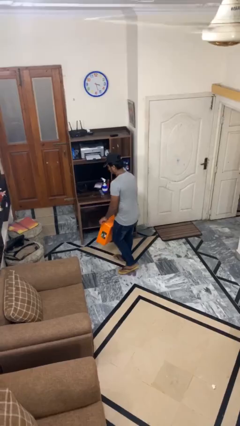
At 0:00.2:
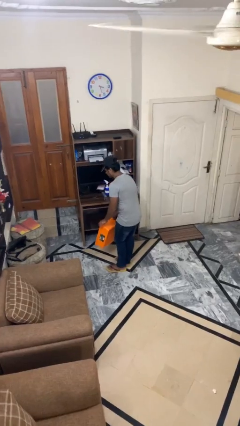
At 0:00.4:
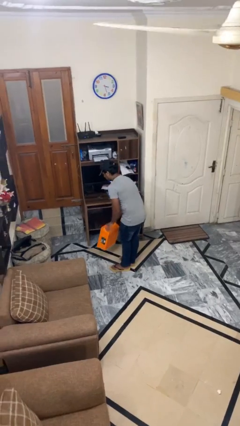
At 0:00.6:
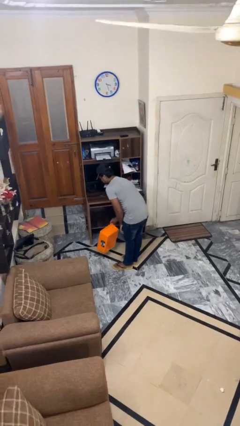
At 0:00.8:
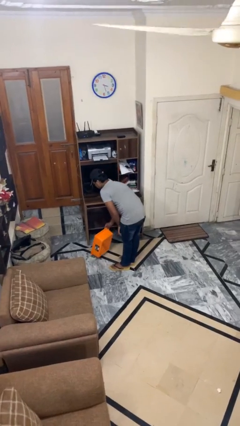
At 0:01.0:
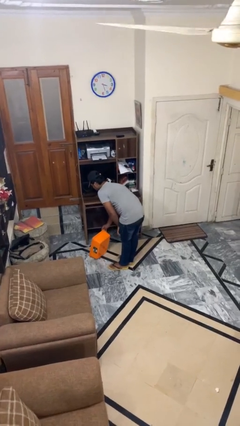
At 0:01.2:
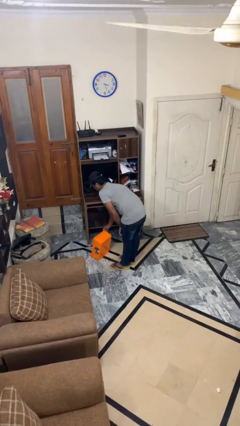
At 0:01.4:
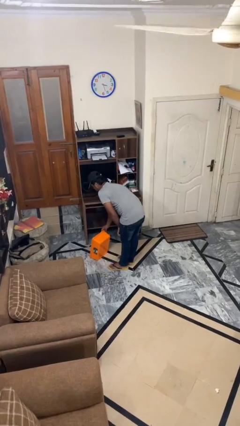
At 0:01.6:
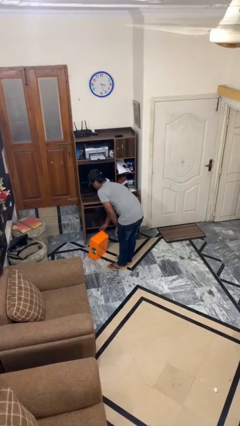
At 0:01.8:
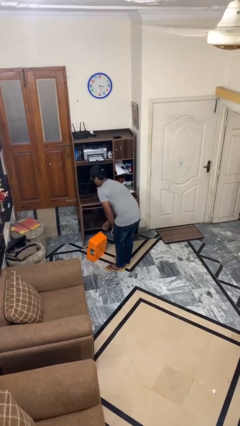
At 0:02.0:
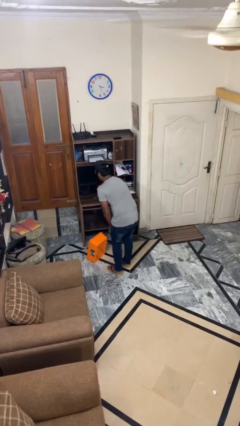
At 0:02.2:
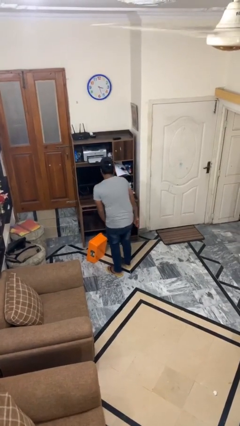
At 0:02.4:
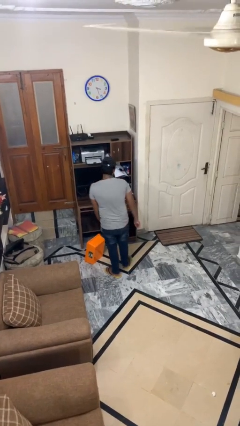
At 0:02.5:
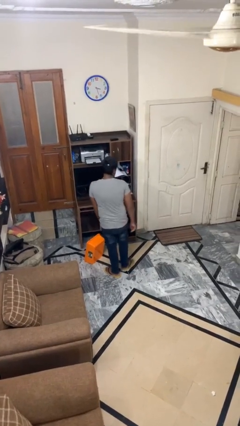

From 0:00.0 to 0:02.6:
person puts down object on floor

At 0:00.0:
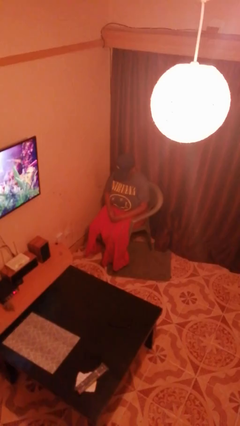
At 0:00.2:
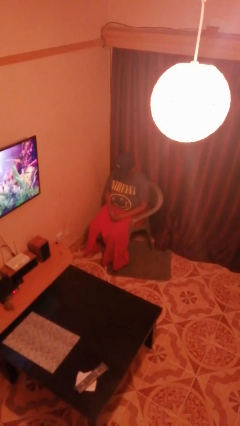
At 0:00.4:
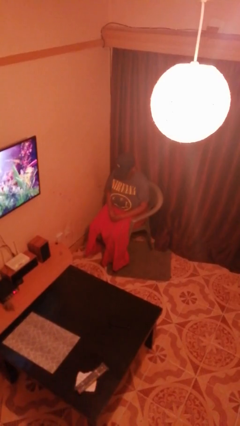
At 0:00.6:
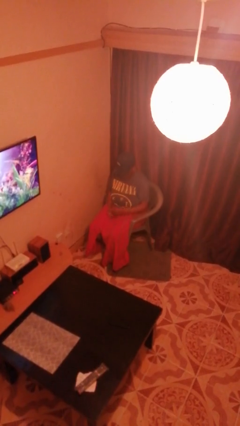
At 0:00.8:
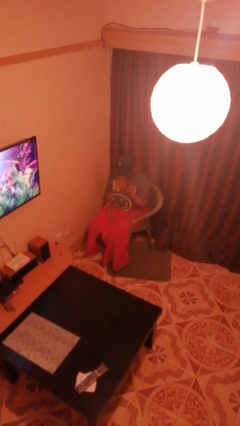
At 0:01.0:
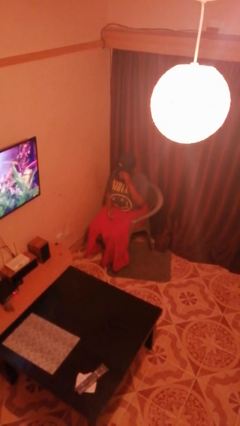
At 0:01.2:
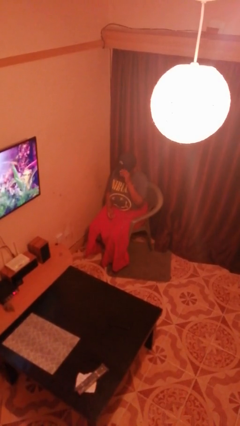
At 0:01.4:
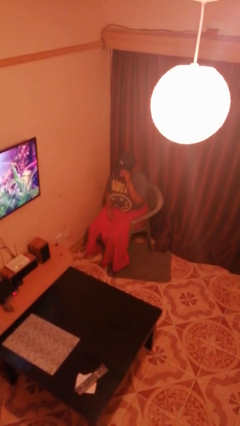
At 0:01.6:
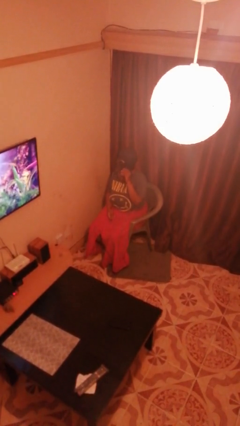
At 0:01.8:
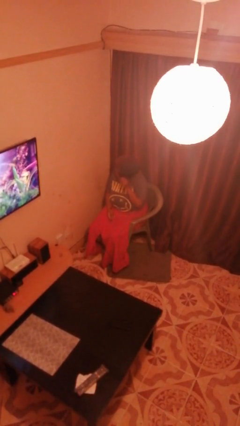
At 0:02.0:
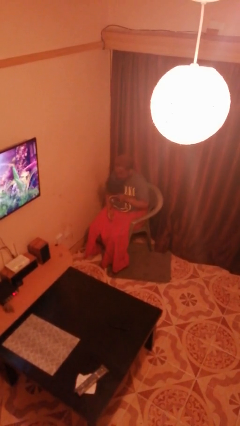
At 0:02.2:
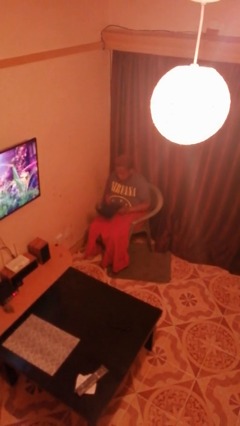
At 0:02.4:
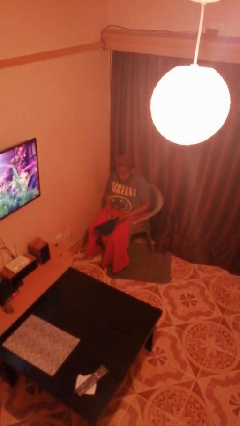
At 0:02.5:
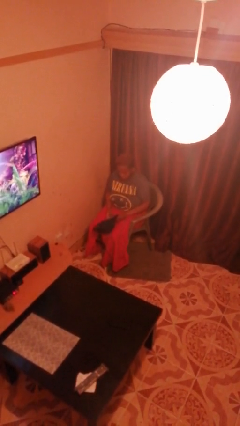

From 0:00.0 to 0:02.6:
person takes off hat

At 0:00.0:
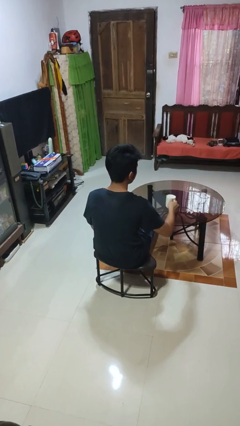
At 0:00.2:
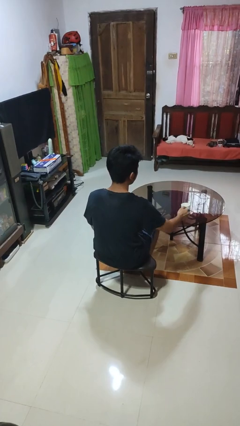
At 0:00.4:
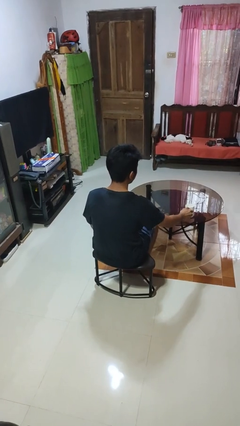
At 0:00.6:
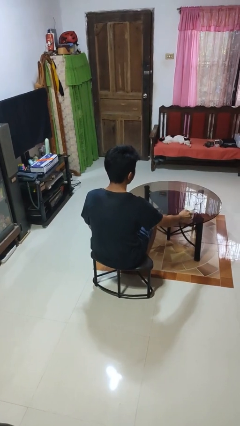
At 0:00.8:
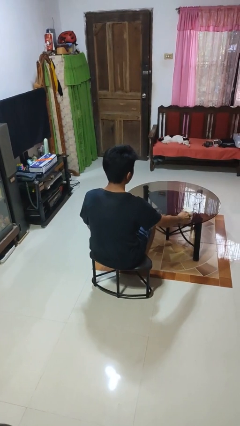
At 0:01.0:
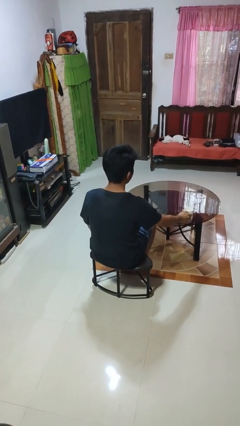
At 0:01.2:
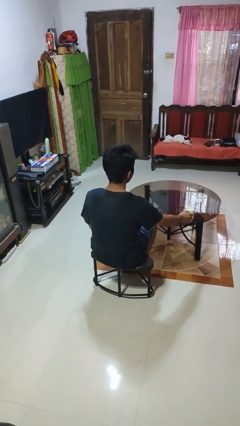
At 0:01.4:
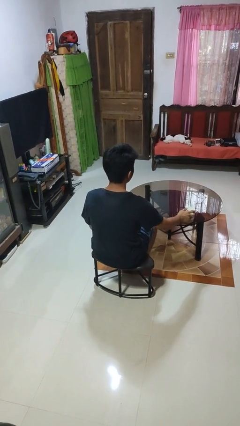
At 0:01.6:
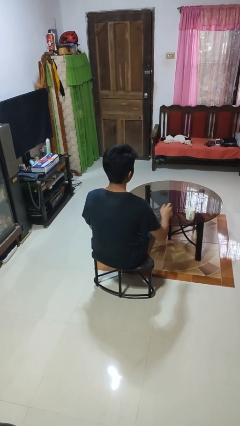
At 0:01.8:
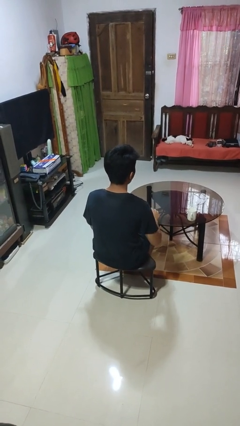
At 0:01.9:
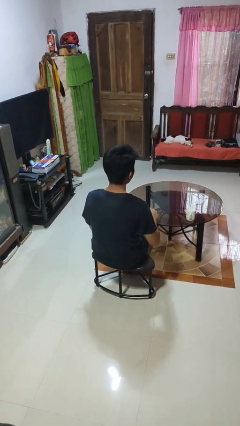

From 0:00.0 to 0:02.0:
person puts down object on table

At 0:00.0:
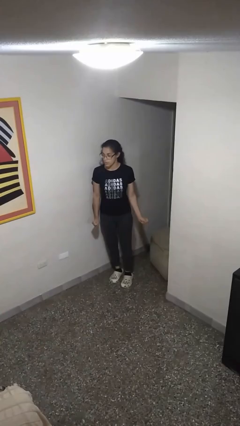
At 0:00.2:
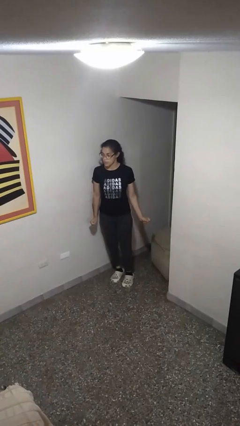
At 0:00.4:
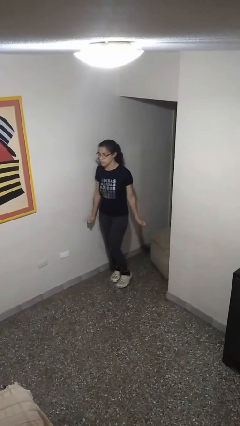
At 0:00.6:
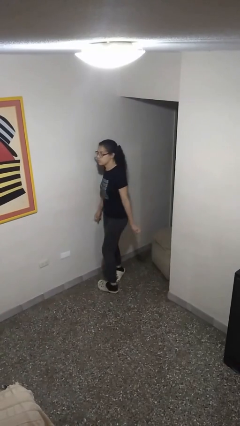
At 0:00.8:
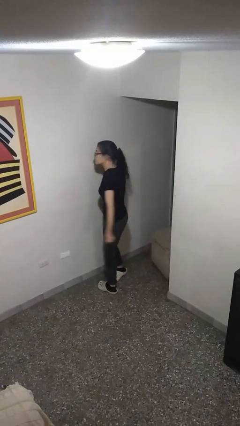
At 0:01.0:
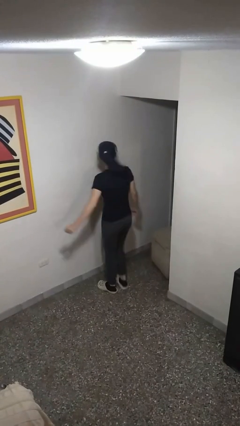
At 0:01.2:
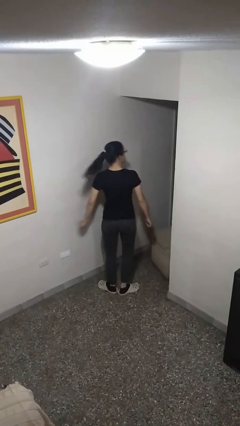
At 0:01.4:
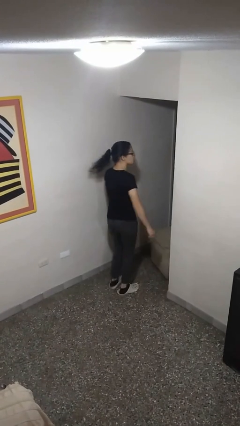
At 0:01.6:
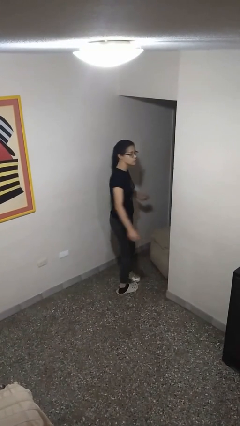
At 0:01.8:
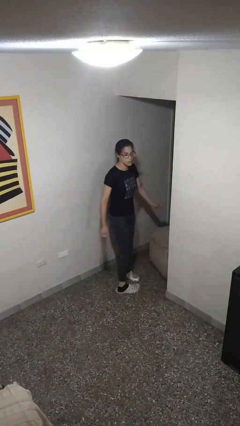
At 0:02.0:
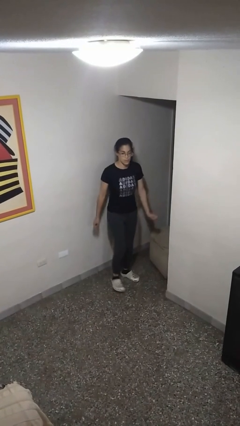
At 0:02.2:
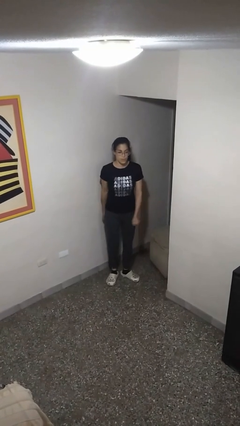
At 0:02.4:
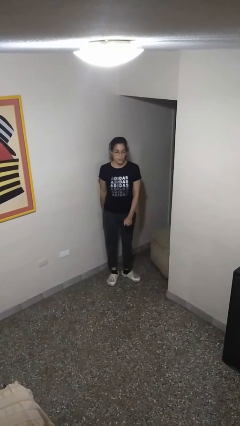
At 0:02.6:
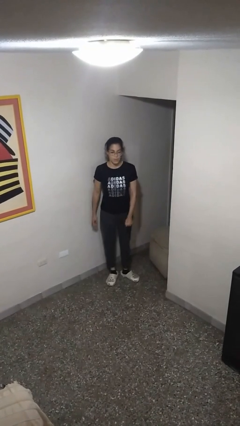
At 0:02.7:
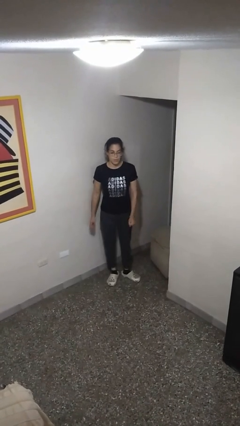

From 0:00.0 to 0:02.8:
person twirls

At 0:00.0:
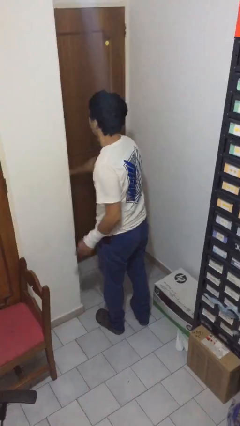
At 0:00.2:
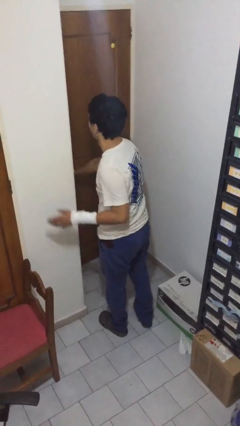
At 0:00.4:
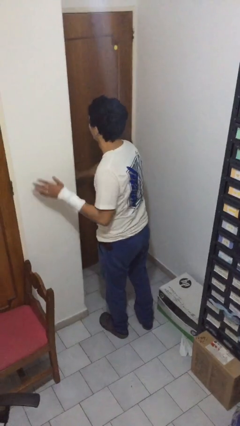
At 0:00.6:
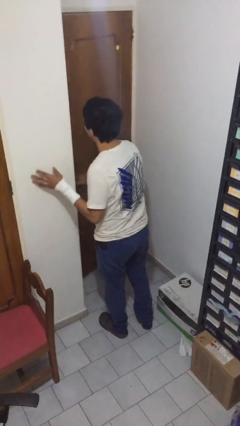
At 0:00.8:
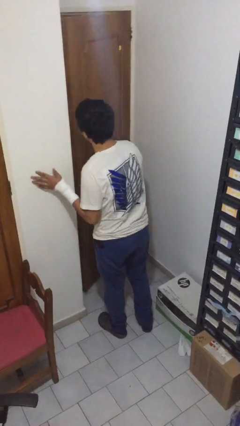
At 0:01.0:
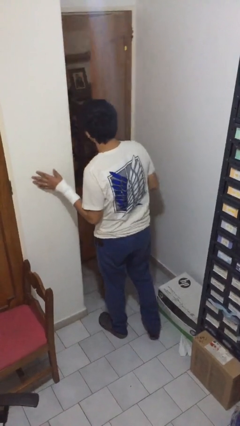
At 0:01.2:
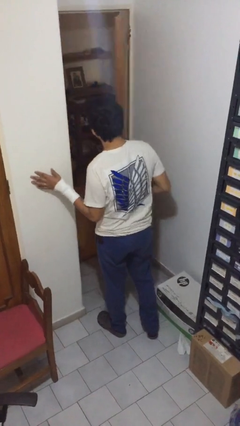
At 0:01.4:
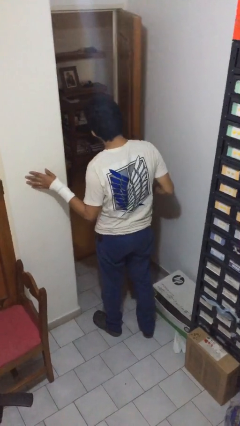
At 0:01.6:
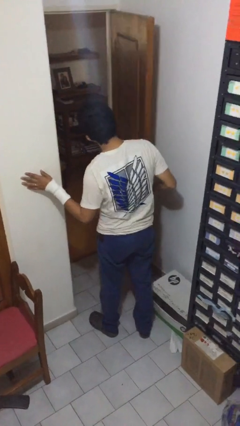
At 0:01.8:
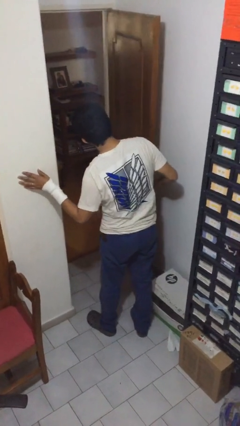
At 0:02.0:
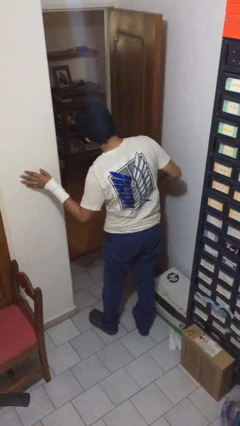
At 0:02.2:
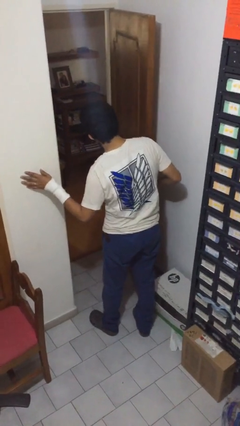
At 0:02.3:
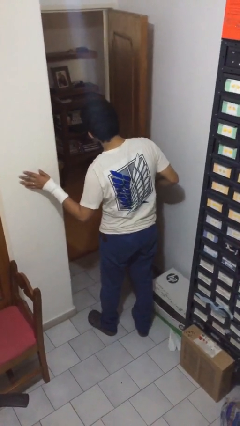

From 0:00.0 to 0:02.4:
person opens facility door

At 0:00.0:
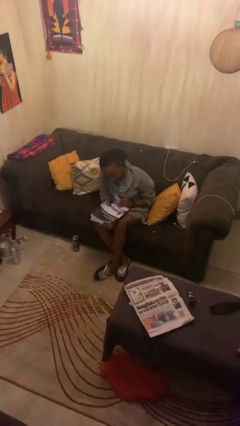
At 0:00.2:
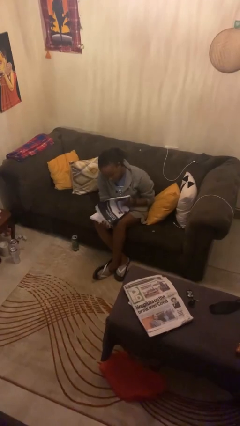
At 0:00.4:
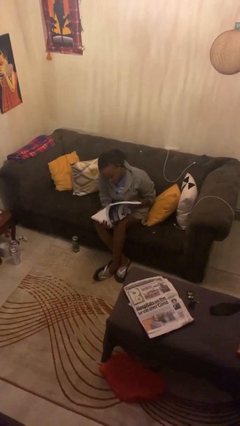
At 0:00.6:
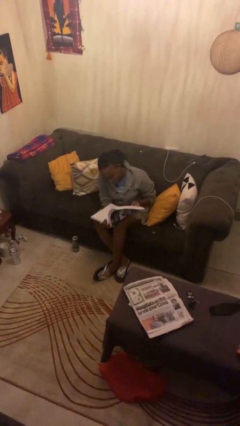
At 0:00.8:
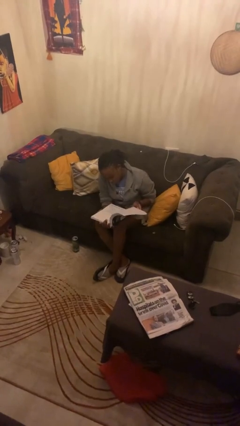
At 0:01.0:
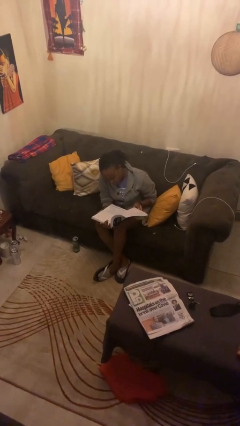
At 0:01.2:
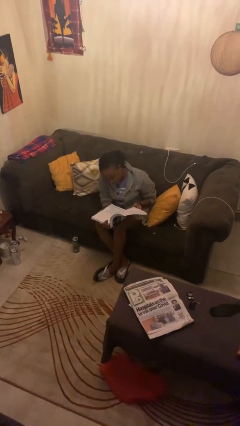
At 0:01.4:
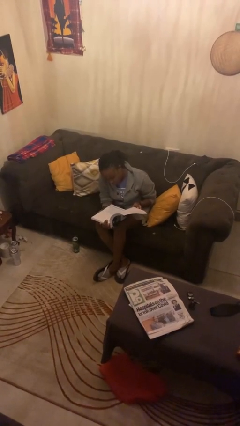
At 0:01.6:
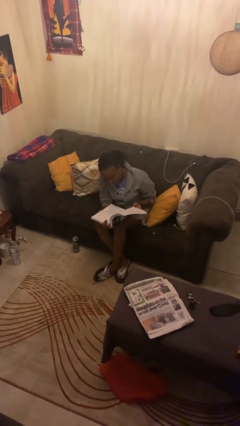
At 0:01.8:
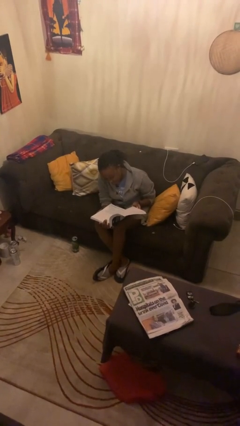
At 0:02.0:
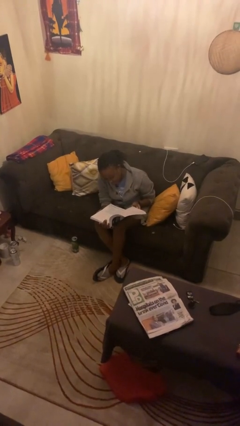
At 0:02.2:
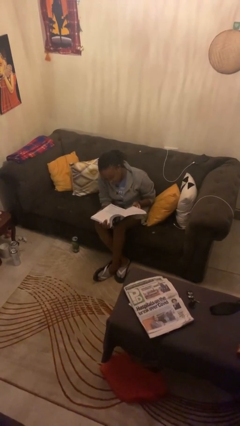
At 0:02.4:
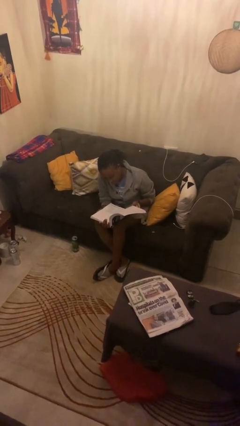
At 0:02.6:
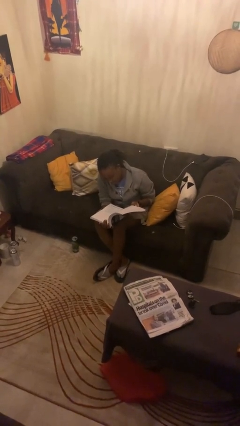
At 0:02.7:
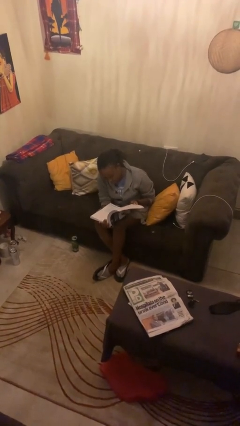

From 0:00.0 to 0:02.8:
person reads book

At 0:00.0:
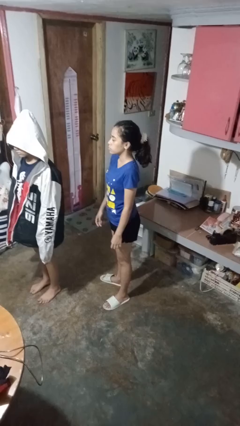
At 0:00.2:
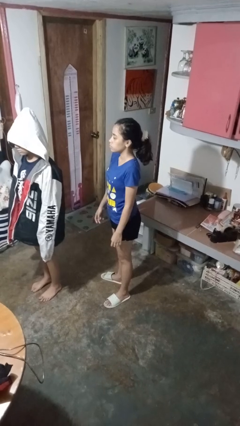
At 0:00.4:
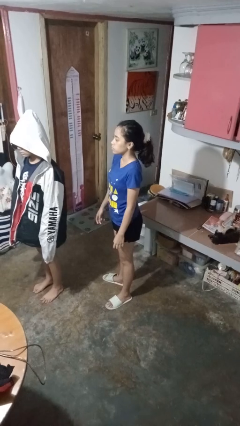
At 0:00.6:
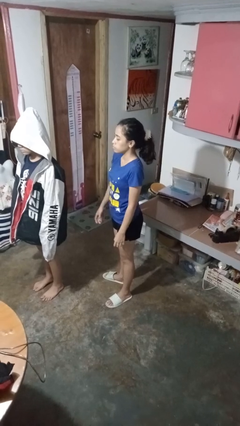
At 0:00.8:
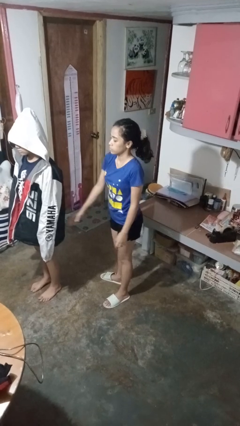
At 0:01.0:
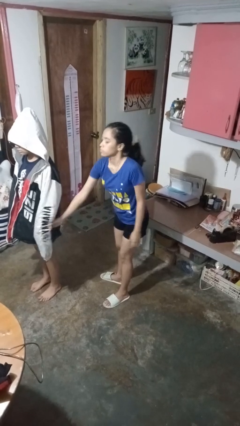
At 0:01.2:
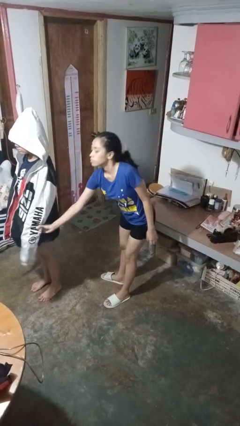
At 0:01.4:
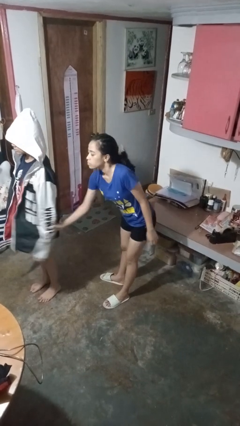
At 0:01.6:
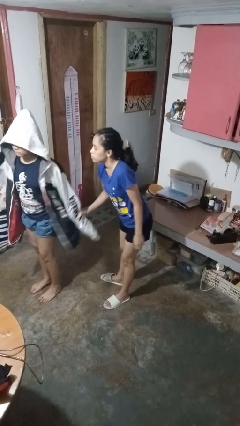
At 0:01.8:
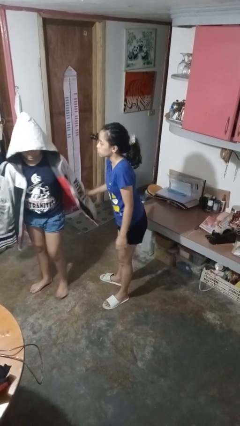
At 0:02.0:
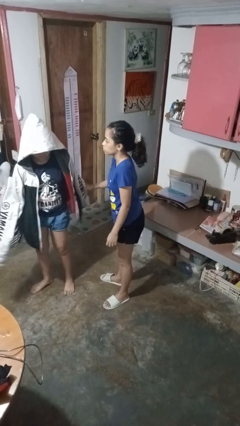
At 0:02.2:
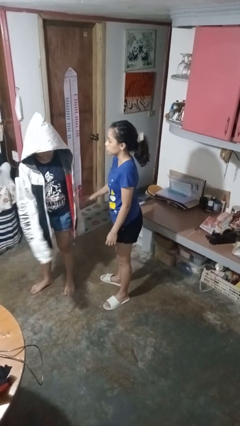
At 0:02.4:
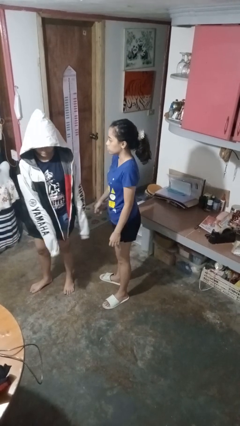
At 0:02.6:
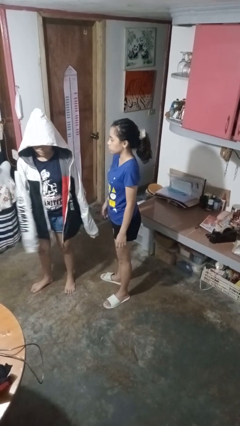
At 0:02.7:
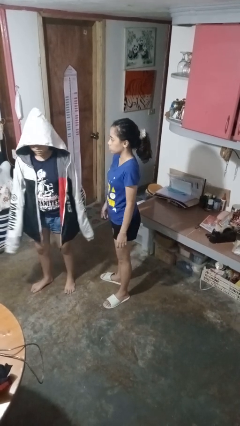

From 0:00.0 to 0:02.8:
person grabs person by forearm
